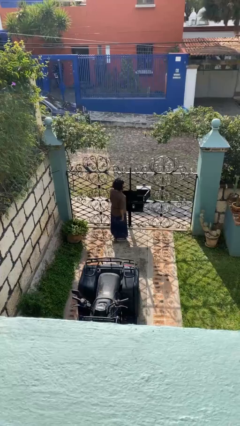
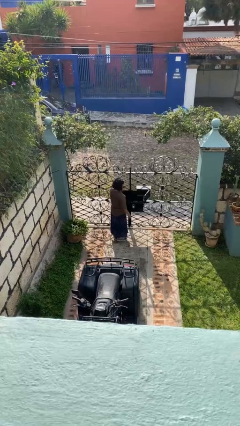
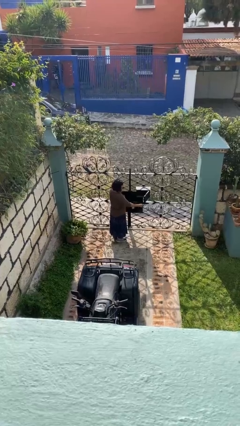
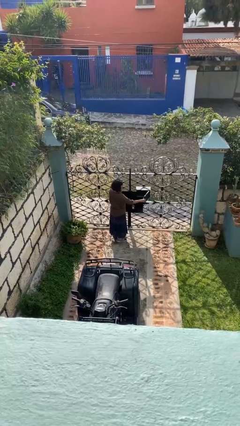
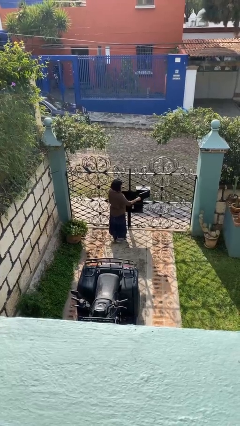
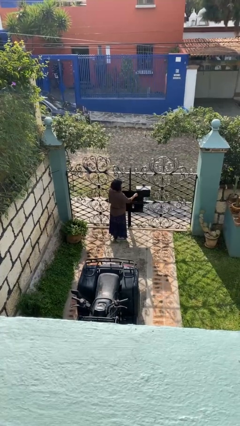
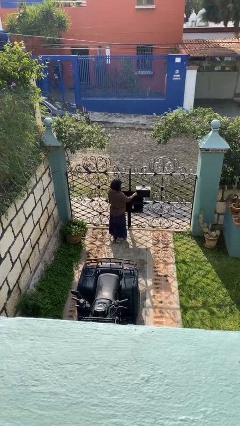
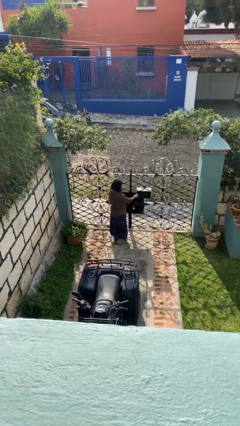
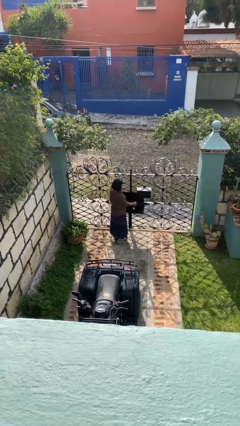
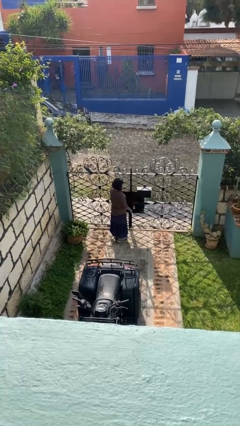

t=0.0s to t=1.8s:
person closes mailbox

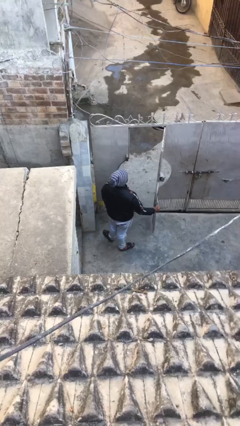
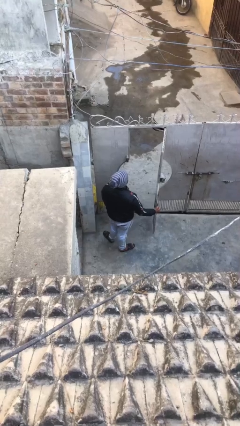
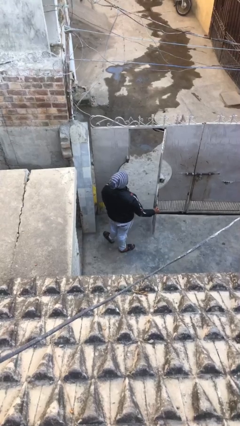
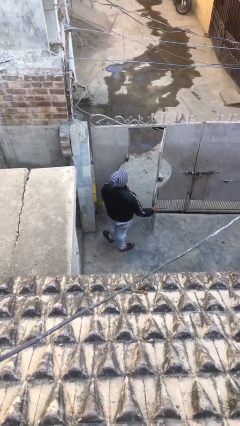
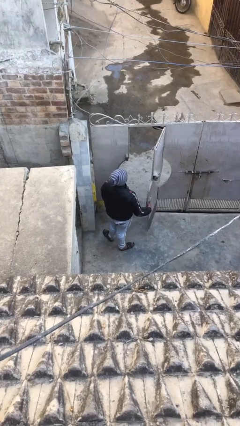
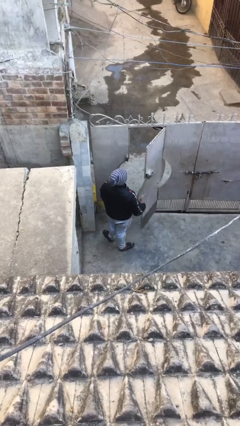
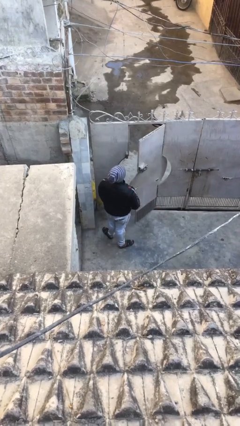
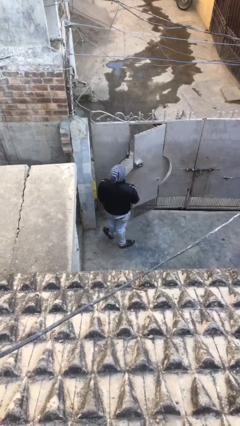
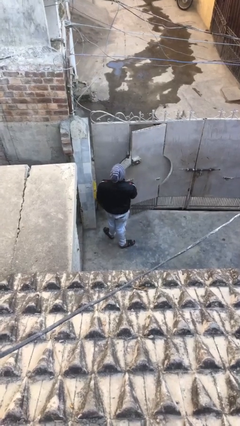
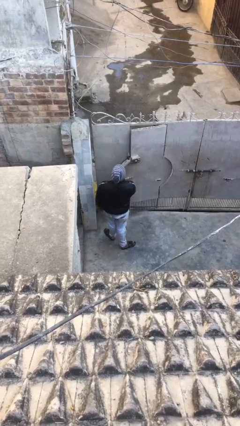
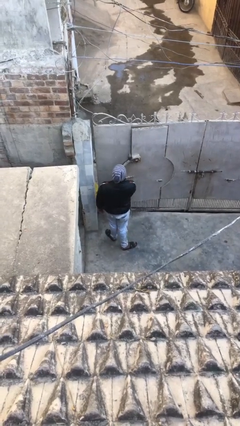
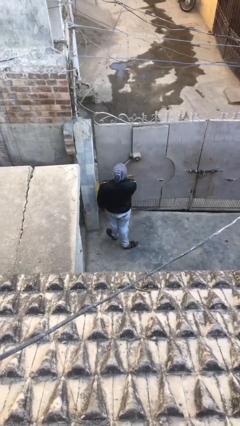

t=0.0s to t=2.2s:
person closes facility door

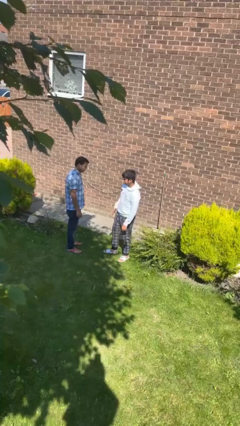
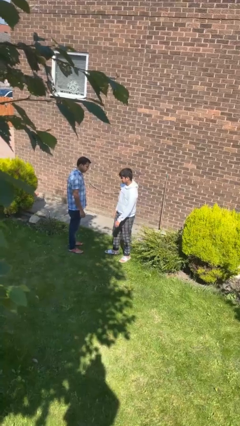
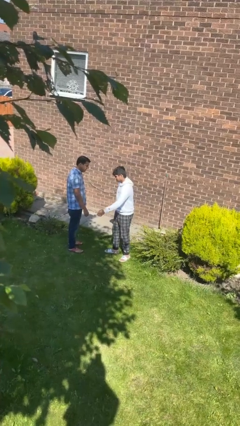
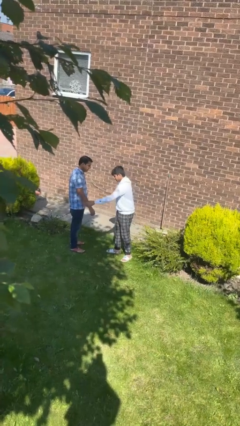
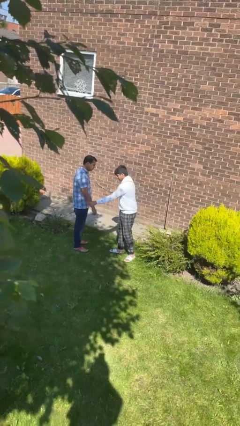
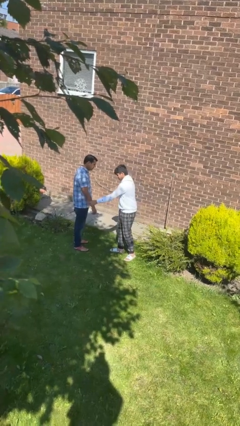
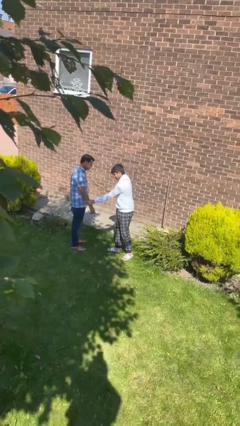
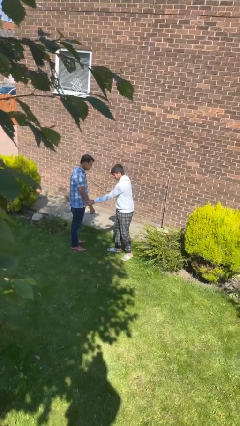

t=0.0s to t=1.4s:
person grabs person by forearm

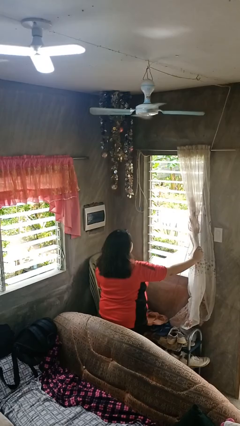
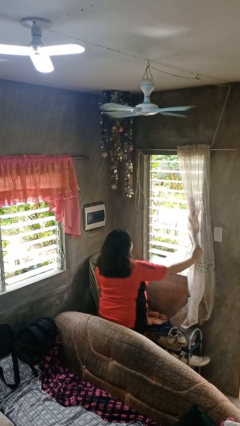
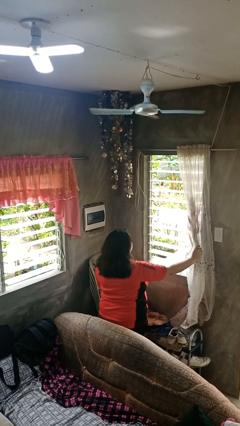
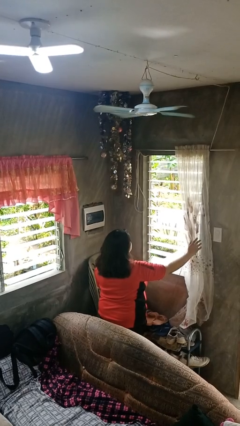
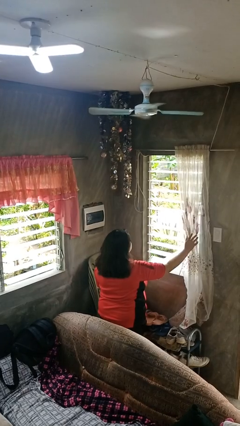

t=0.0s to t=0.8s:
person closes curtains

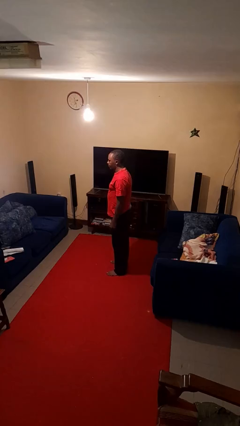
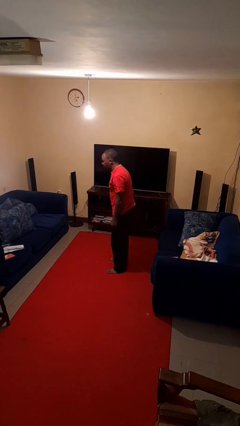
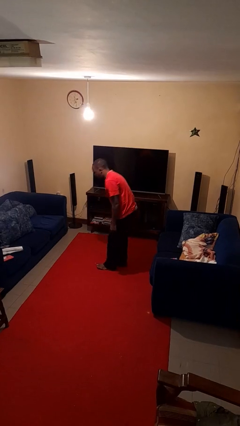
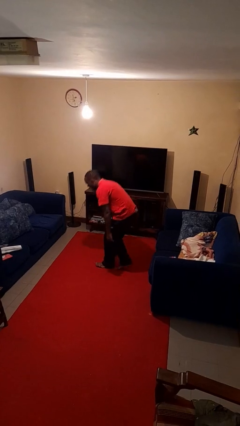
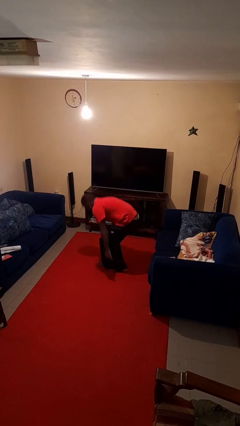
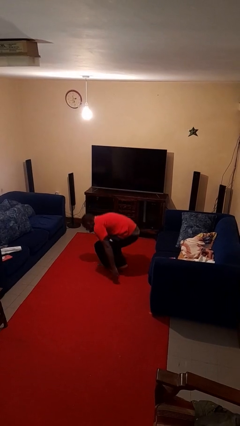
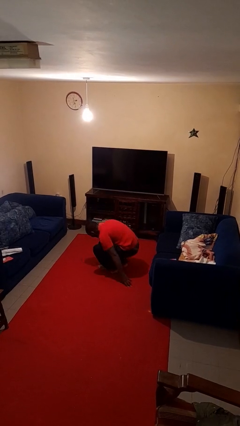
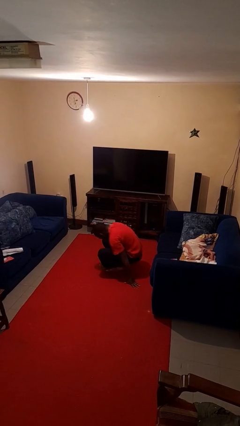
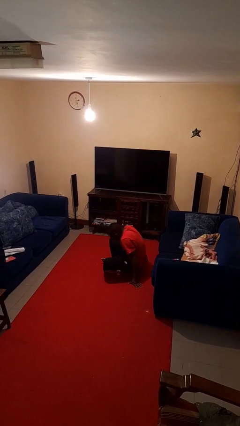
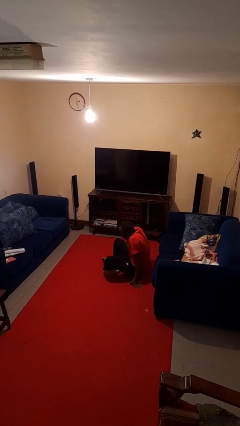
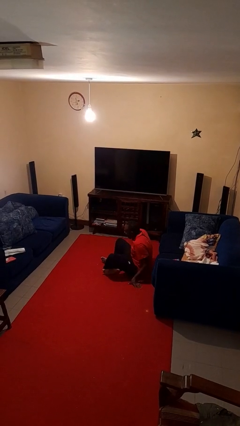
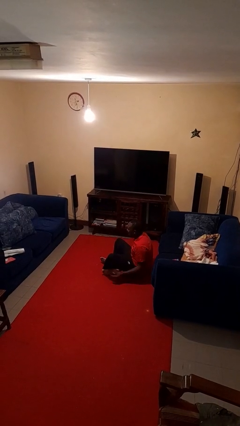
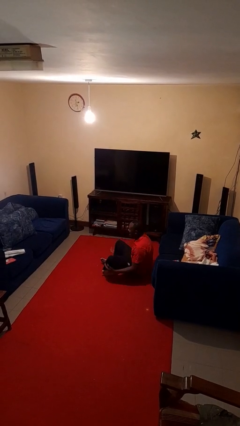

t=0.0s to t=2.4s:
person sits crisscross

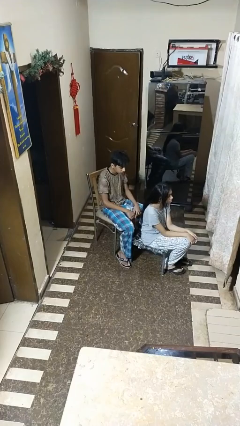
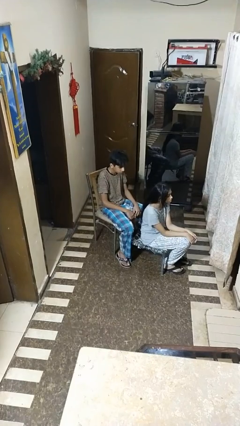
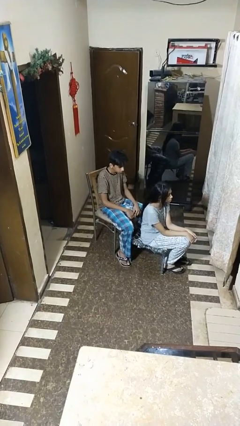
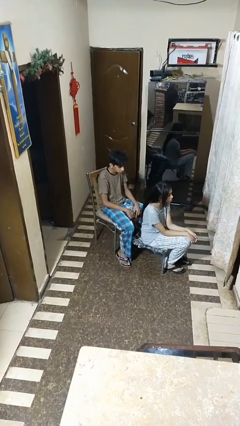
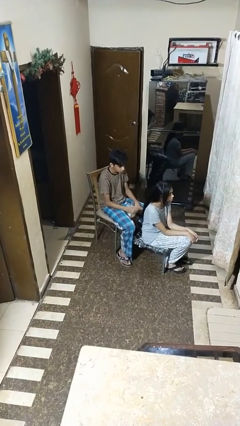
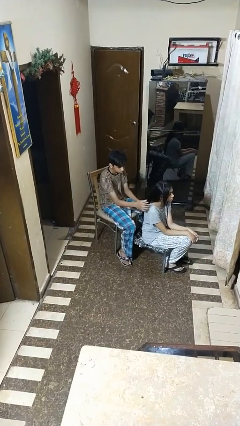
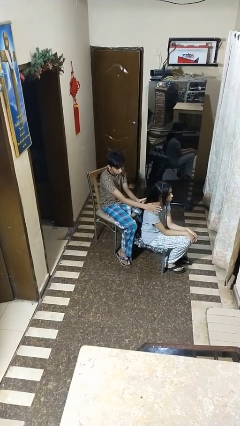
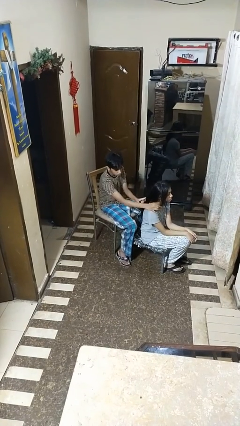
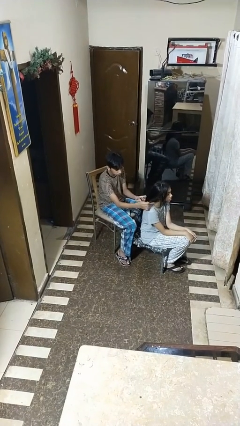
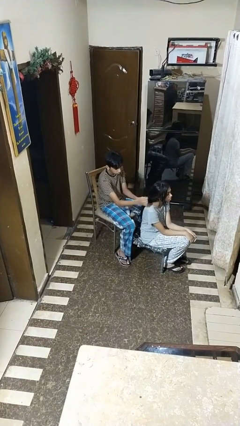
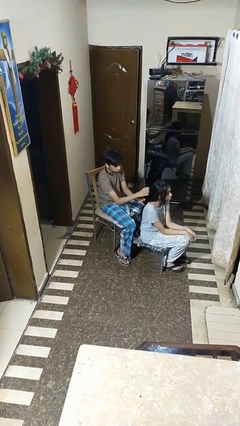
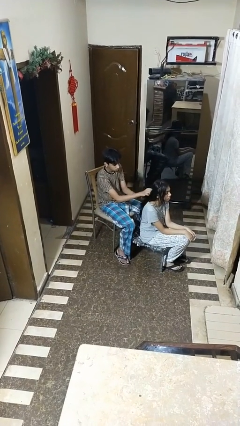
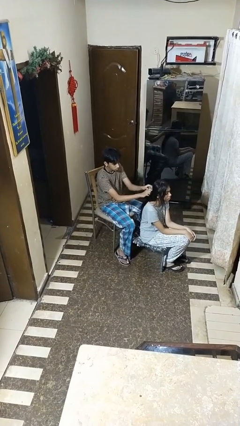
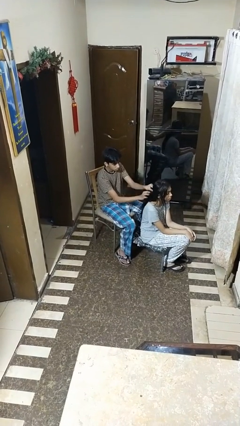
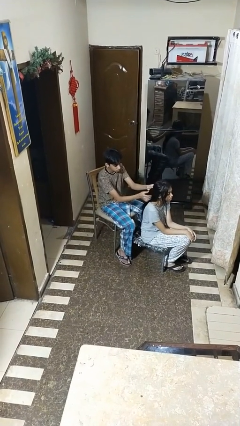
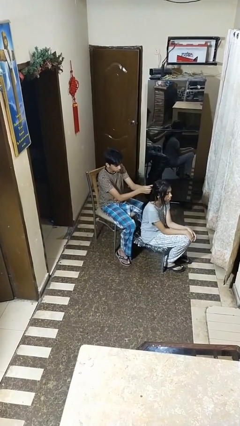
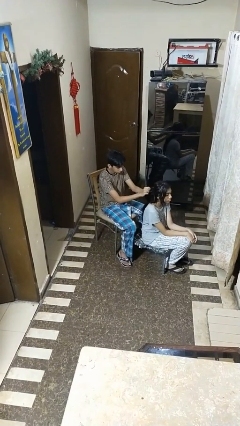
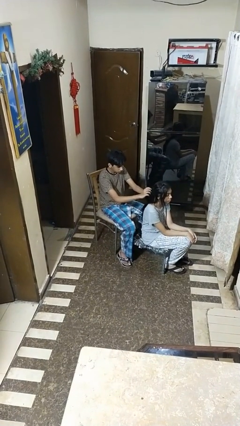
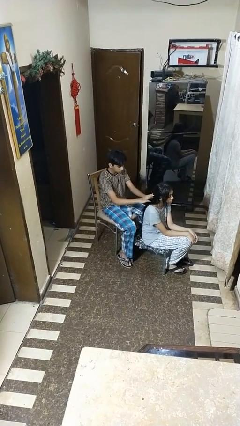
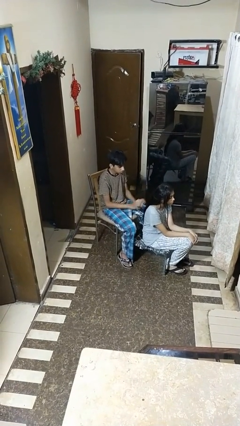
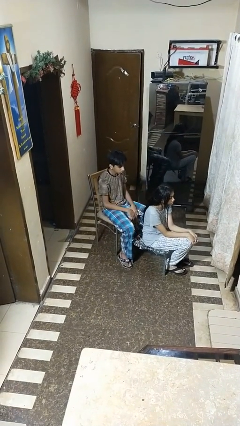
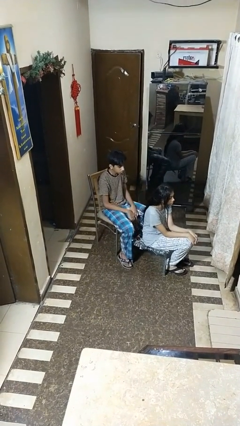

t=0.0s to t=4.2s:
person braids hair of person

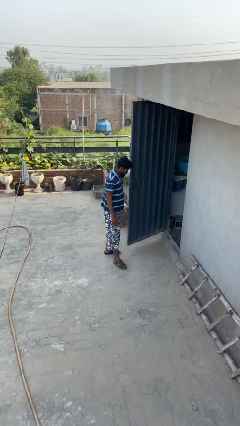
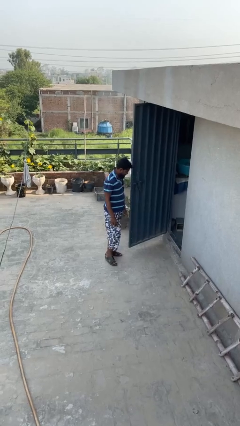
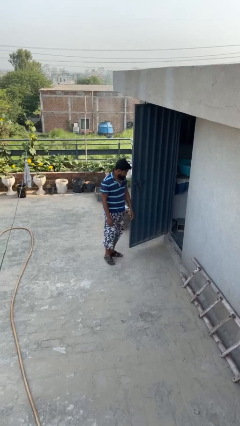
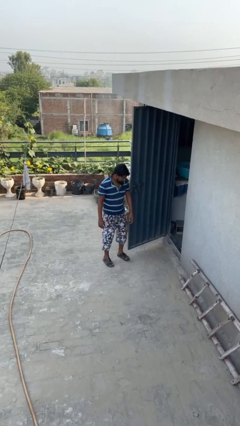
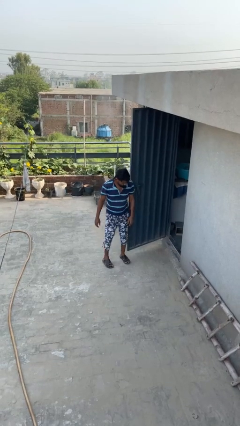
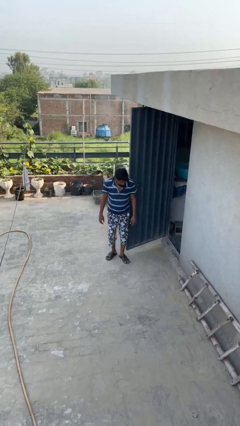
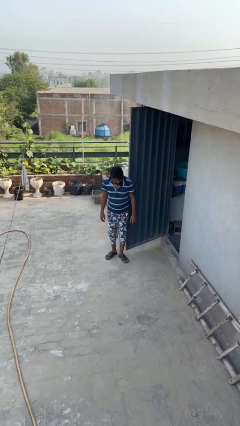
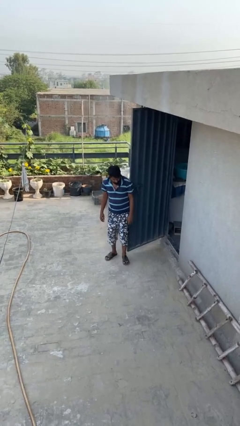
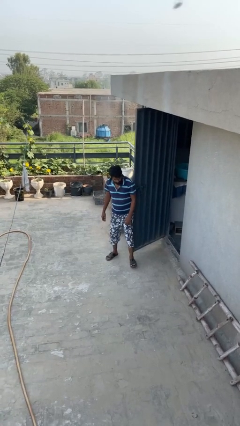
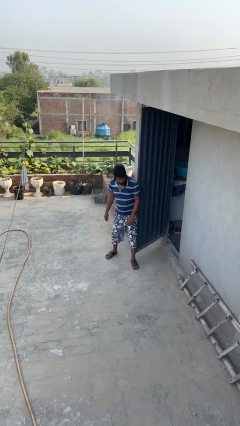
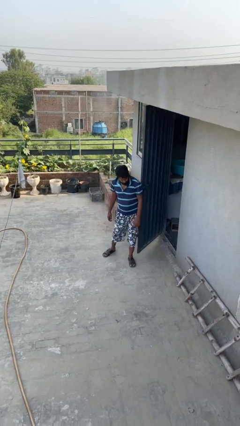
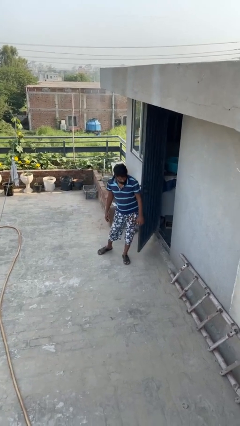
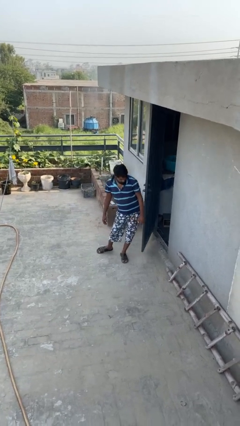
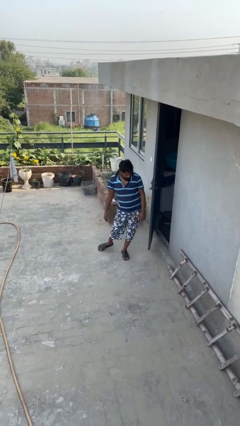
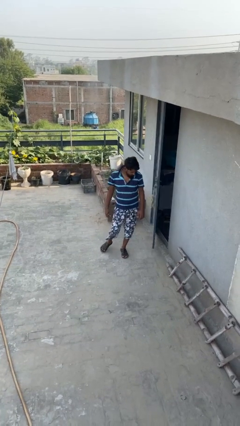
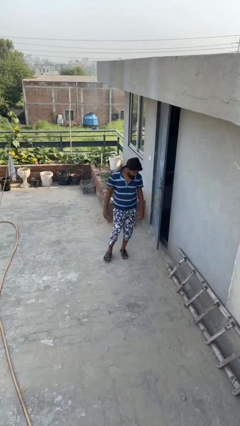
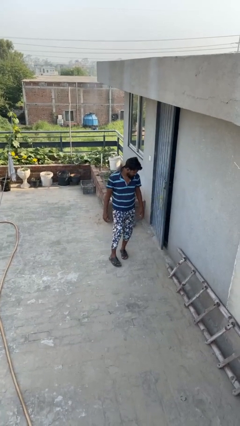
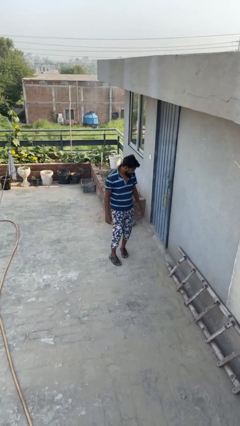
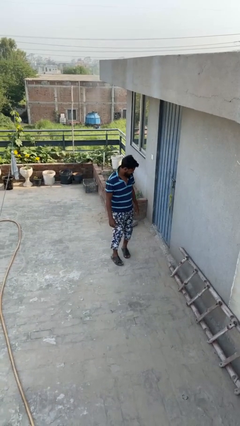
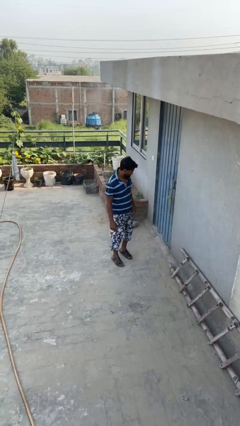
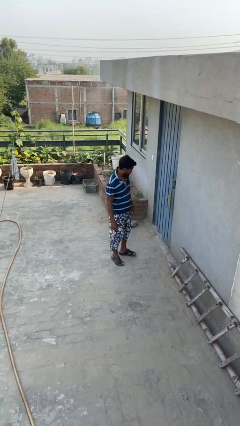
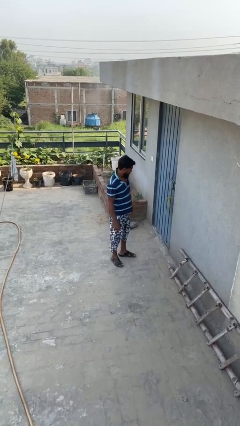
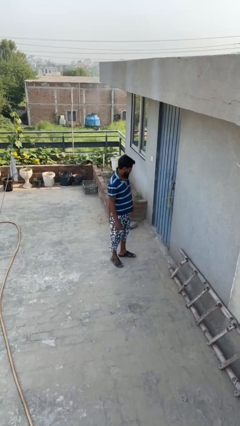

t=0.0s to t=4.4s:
person closes door with hip
